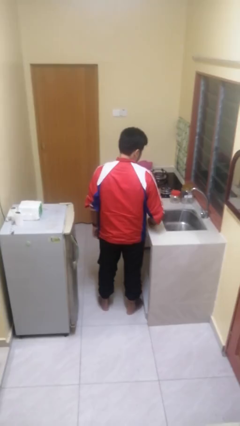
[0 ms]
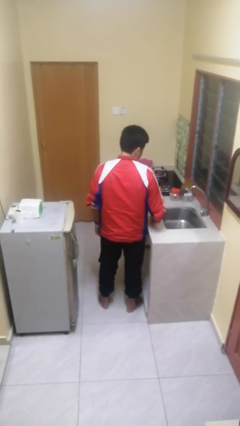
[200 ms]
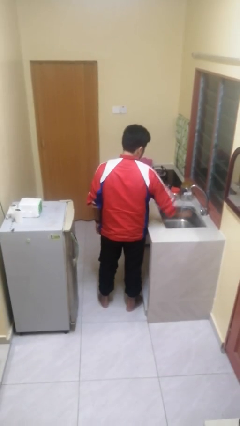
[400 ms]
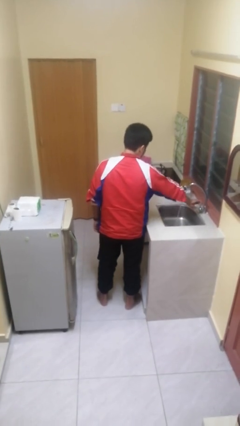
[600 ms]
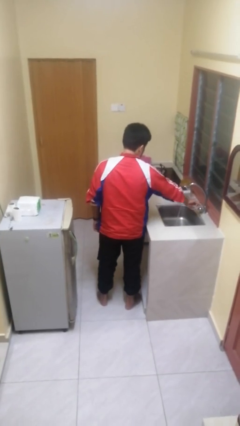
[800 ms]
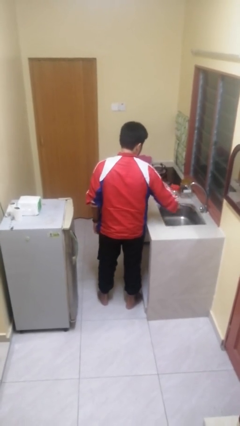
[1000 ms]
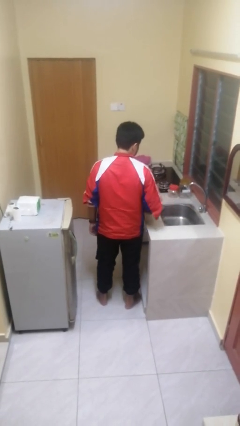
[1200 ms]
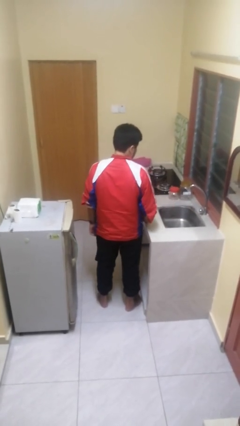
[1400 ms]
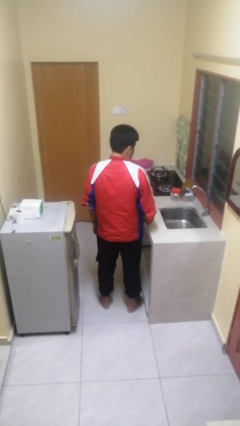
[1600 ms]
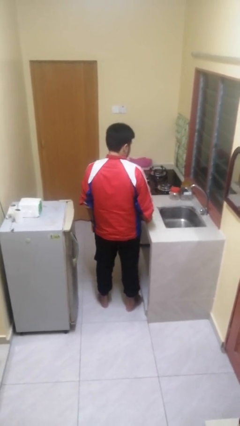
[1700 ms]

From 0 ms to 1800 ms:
person turns off faucet

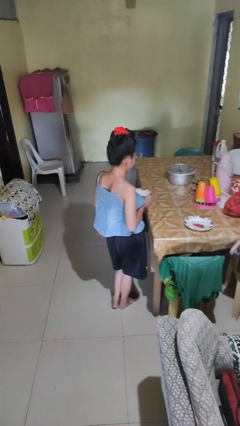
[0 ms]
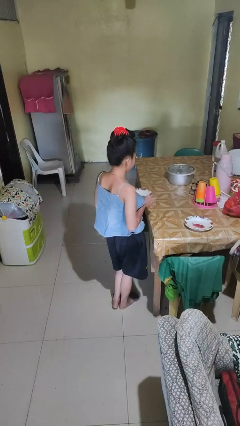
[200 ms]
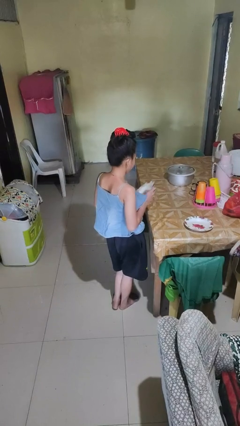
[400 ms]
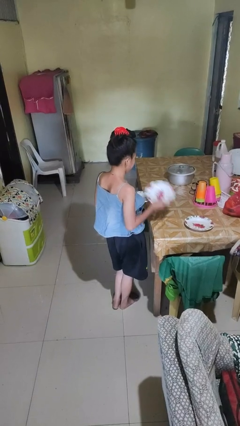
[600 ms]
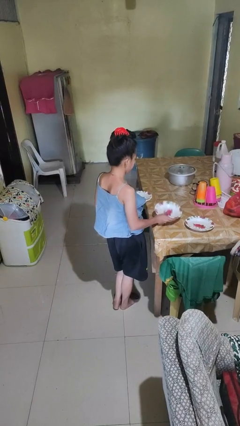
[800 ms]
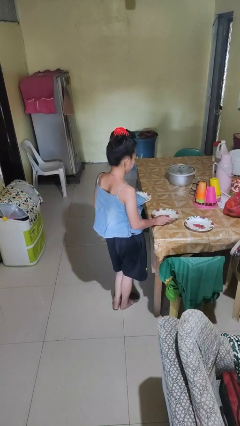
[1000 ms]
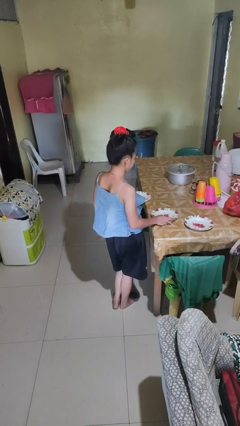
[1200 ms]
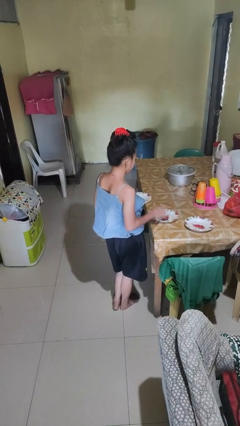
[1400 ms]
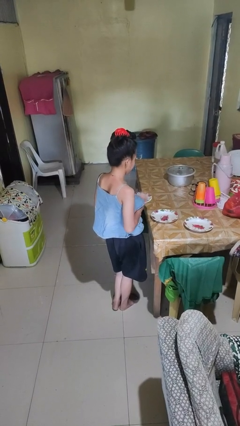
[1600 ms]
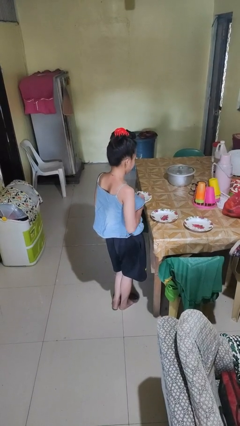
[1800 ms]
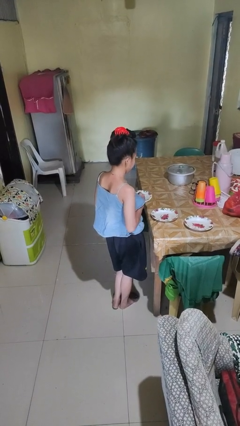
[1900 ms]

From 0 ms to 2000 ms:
person sets table

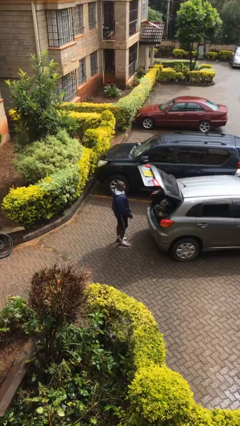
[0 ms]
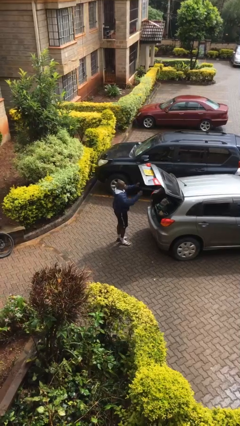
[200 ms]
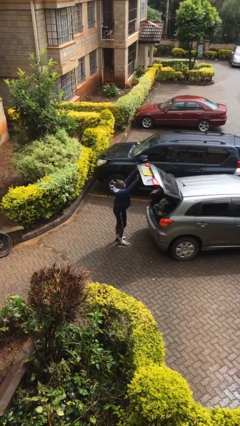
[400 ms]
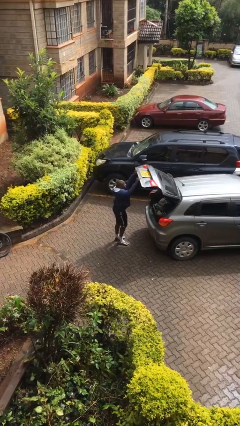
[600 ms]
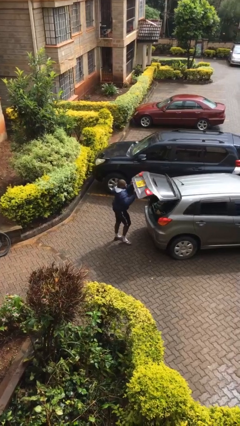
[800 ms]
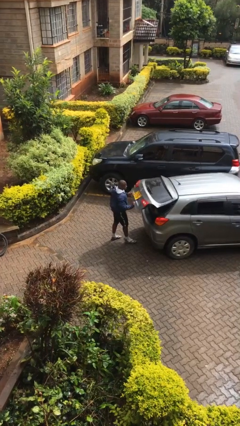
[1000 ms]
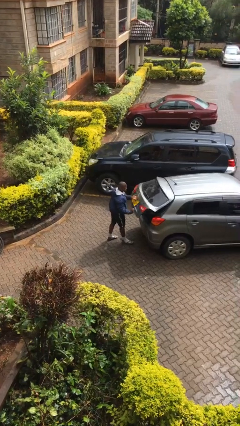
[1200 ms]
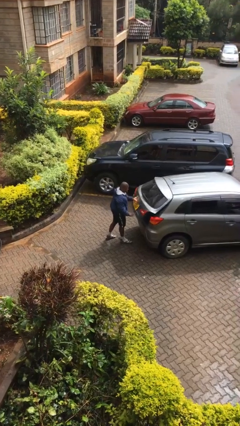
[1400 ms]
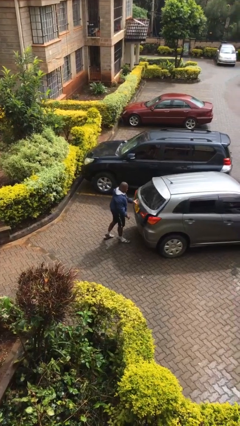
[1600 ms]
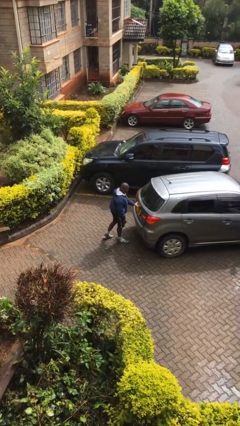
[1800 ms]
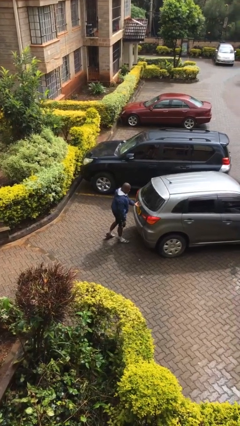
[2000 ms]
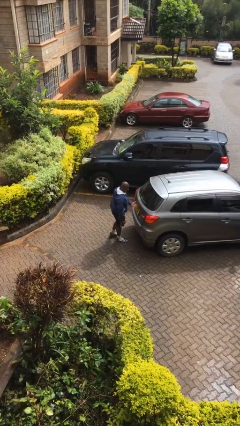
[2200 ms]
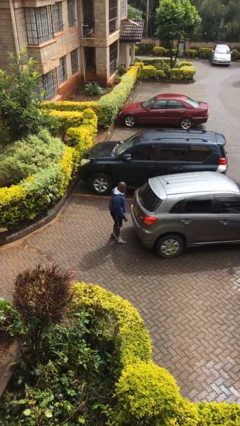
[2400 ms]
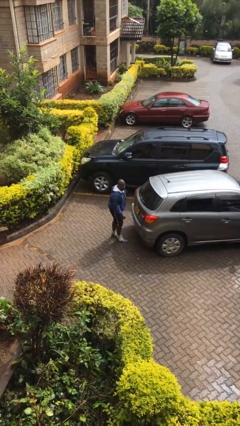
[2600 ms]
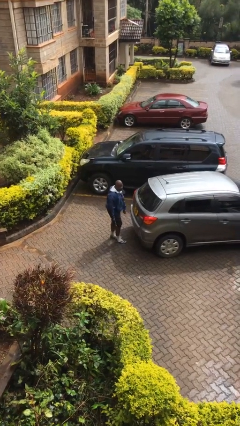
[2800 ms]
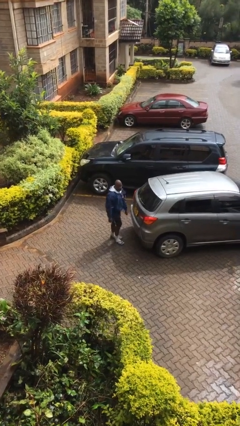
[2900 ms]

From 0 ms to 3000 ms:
person closes car trunk

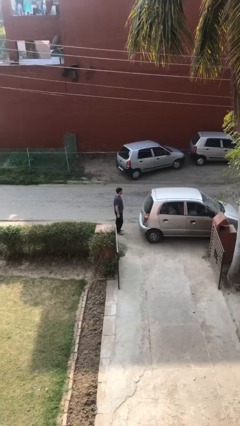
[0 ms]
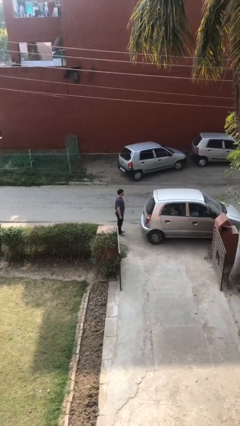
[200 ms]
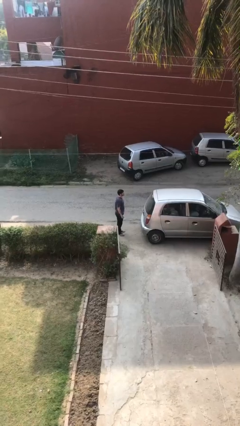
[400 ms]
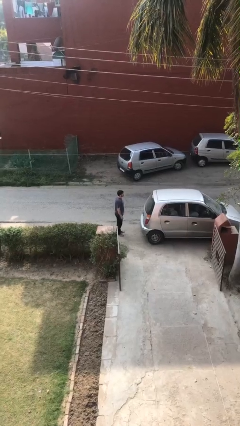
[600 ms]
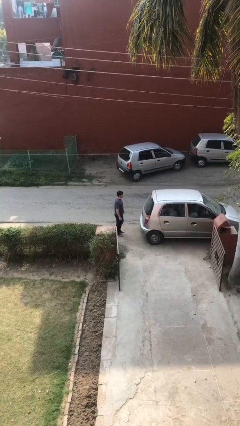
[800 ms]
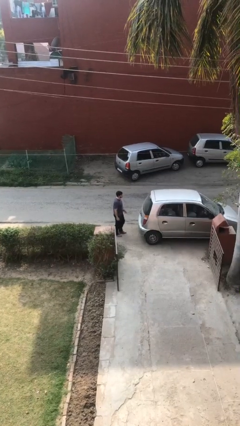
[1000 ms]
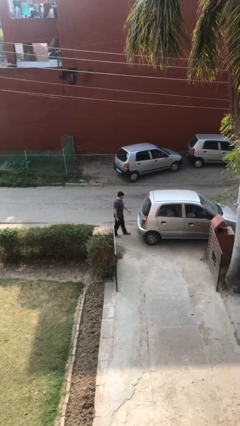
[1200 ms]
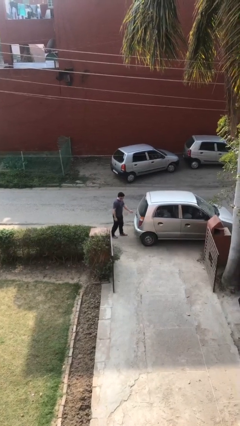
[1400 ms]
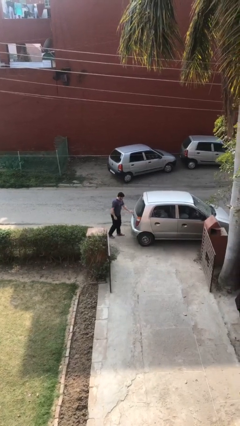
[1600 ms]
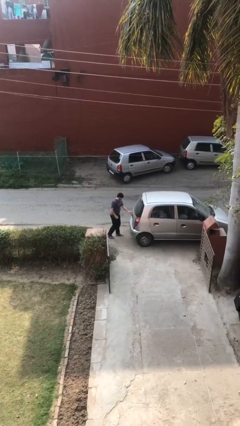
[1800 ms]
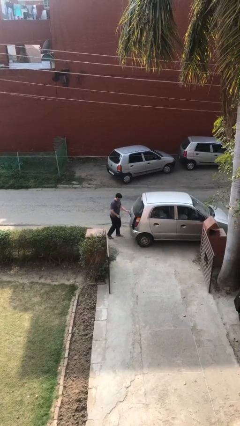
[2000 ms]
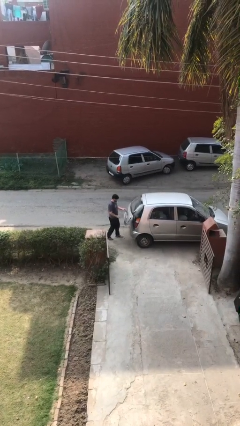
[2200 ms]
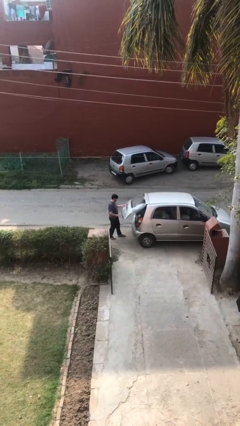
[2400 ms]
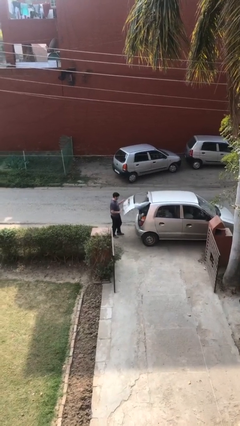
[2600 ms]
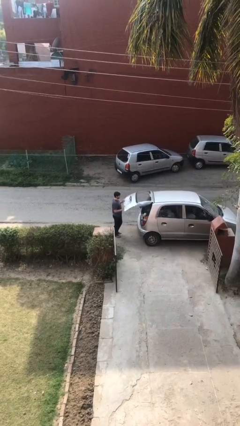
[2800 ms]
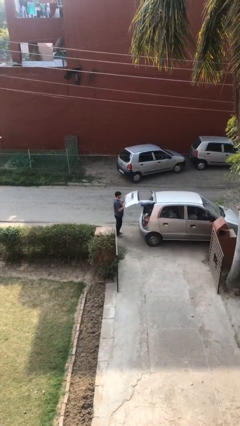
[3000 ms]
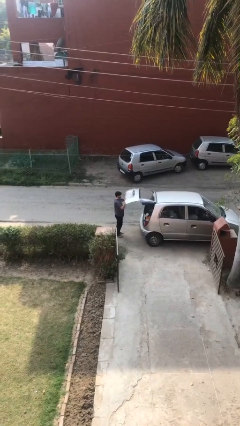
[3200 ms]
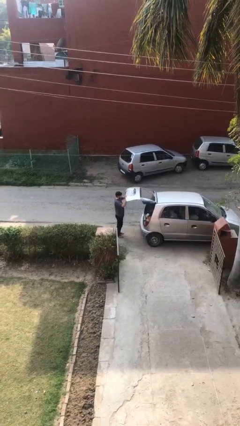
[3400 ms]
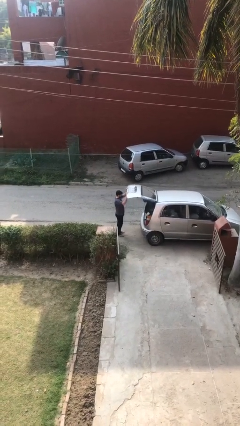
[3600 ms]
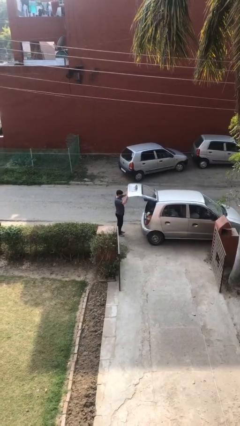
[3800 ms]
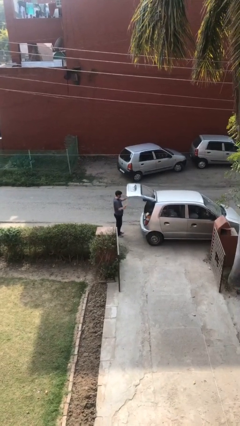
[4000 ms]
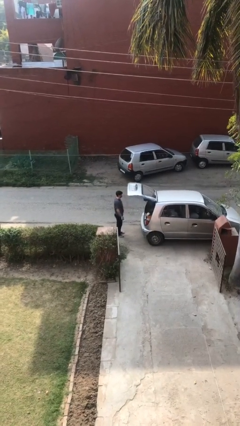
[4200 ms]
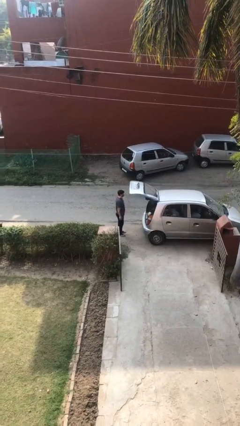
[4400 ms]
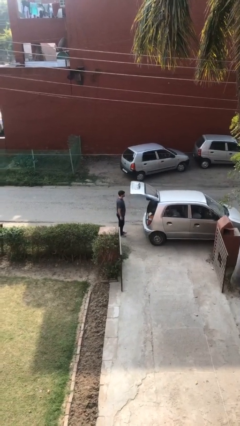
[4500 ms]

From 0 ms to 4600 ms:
person opens car trunk

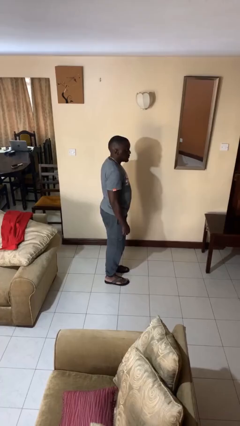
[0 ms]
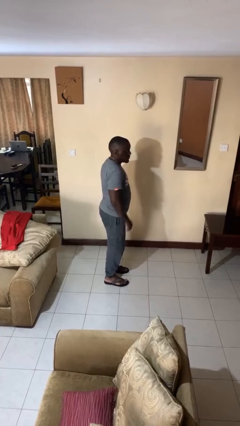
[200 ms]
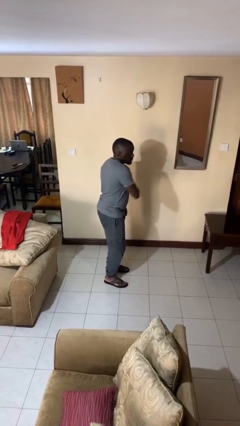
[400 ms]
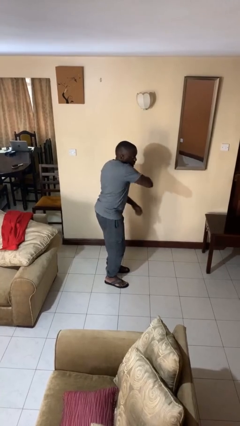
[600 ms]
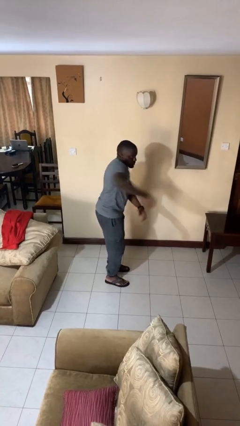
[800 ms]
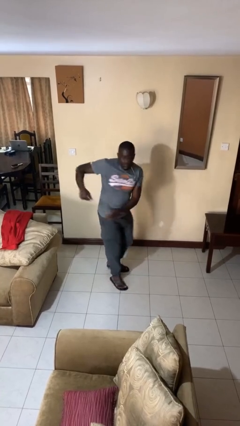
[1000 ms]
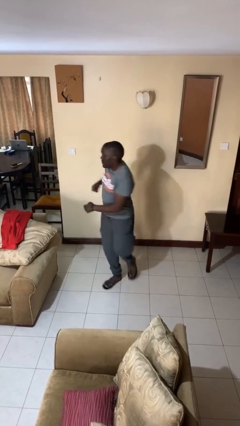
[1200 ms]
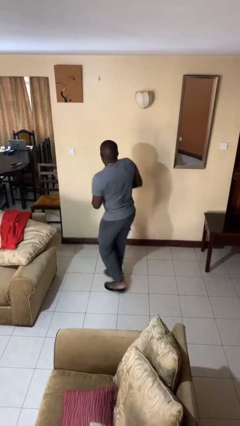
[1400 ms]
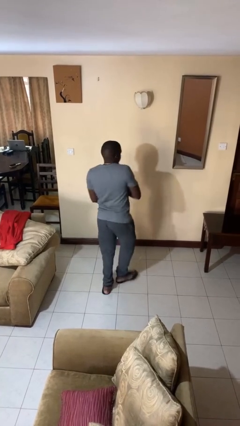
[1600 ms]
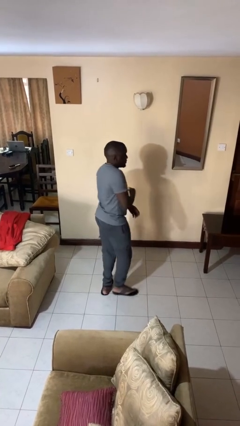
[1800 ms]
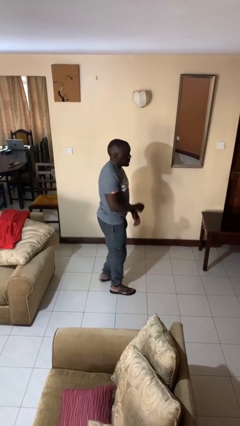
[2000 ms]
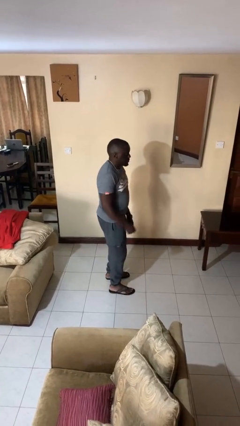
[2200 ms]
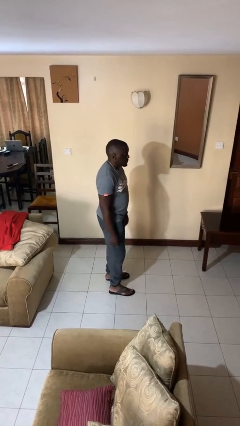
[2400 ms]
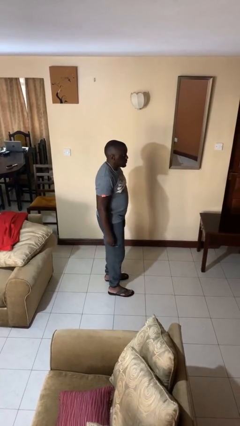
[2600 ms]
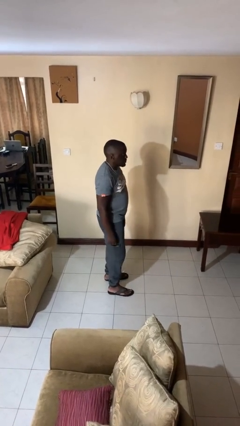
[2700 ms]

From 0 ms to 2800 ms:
person twirls

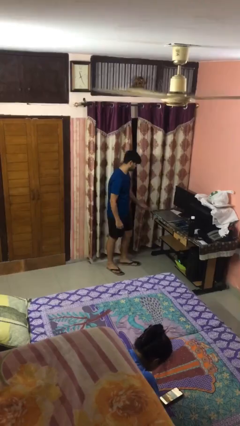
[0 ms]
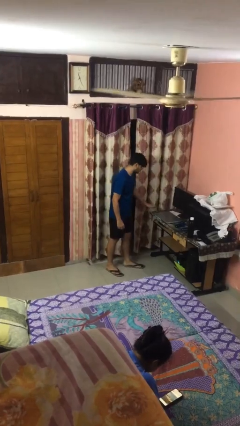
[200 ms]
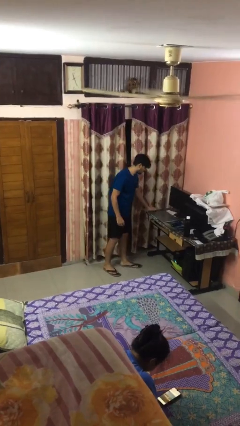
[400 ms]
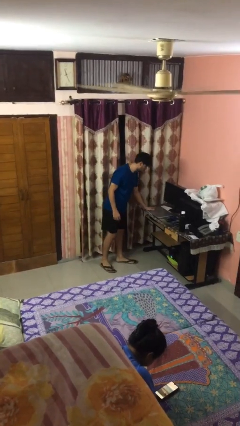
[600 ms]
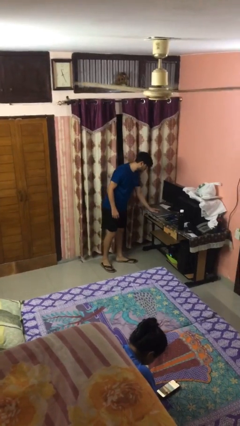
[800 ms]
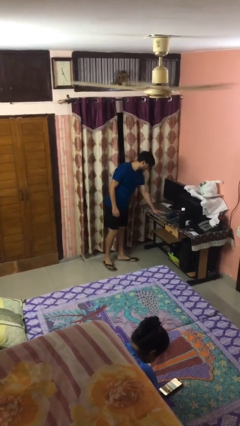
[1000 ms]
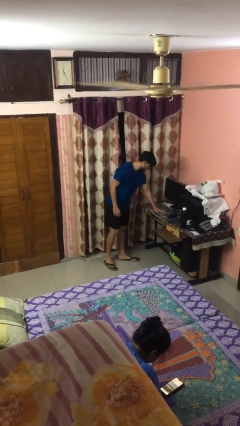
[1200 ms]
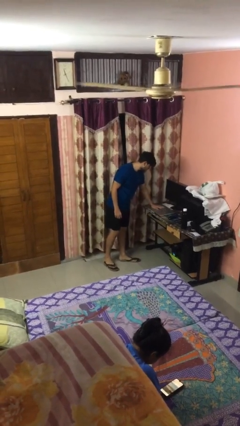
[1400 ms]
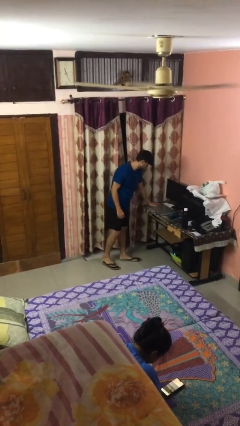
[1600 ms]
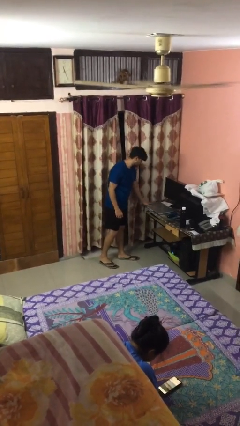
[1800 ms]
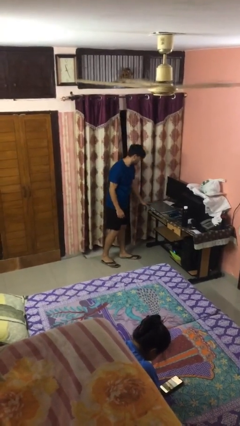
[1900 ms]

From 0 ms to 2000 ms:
person waves hand over object

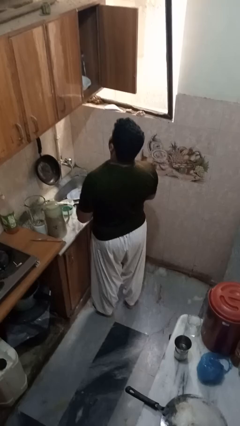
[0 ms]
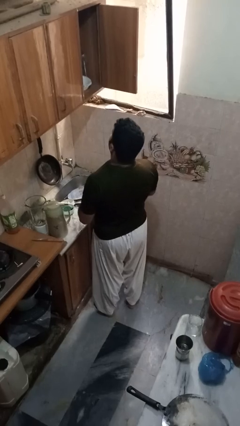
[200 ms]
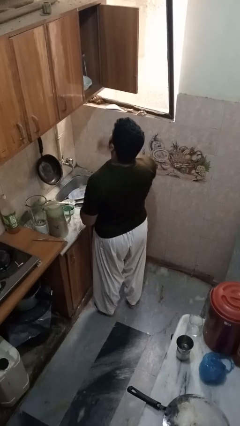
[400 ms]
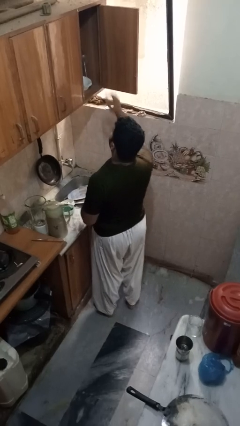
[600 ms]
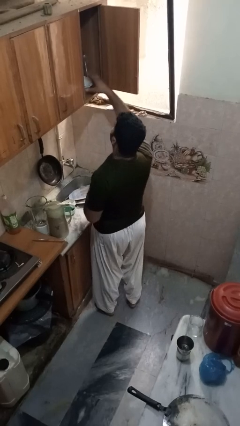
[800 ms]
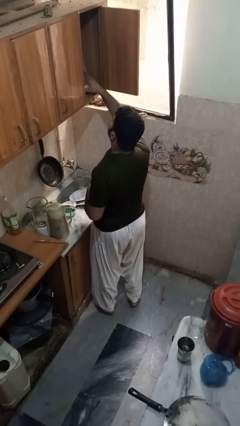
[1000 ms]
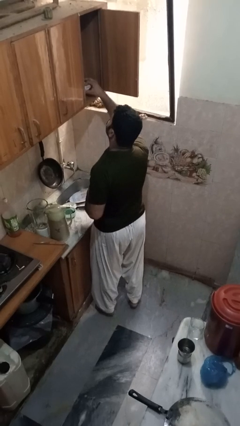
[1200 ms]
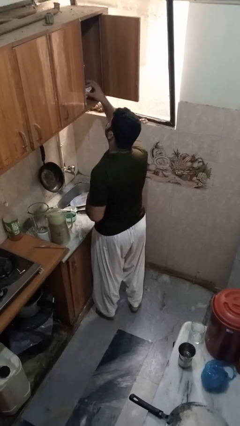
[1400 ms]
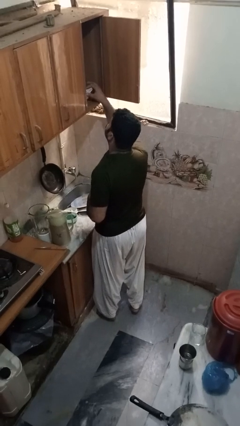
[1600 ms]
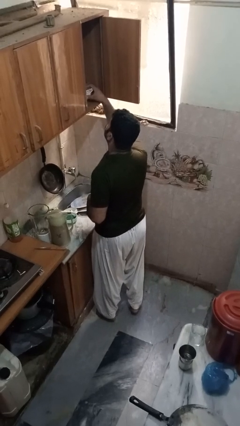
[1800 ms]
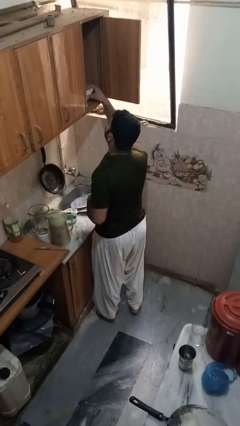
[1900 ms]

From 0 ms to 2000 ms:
person takes object from cabinet
